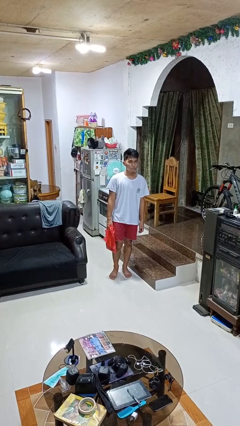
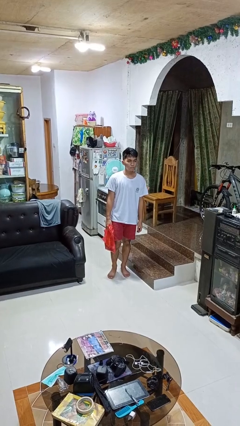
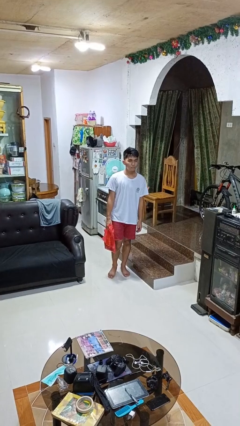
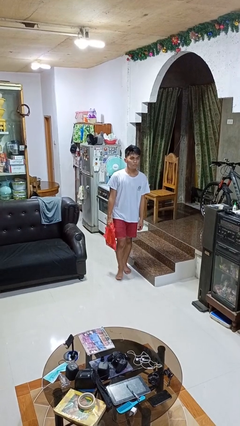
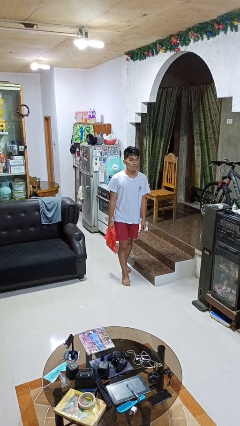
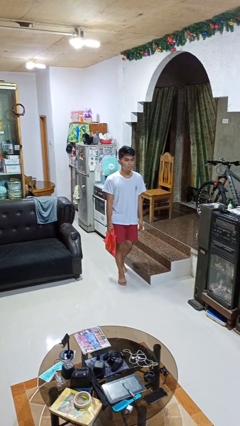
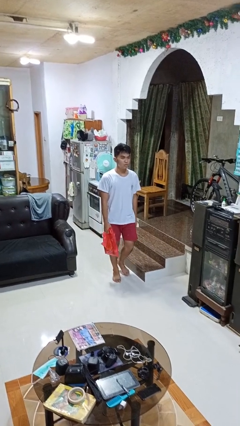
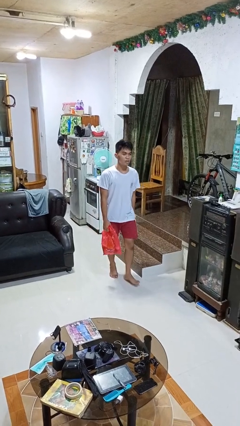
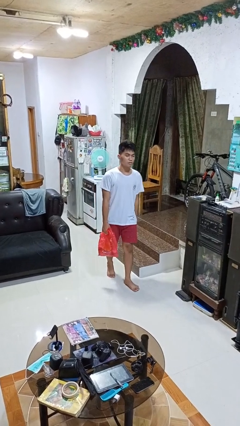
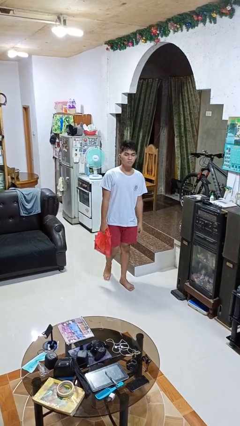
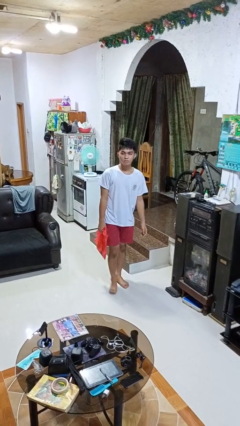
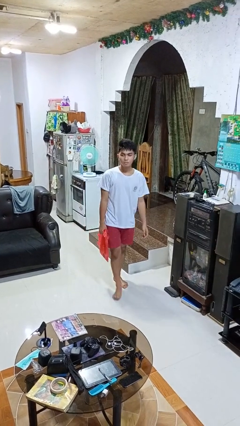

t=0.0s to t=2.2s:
person carries groceries

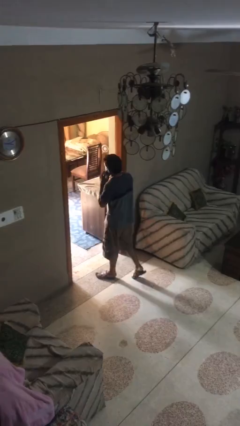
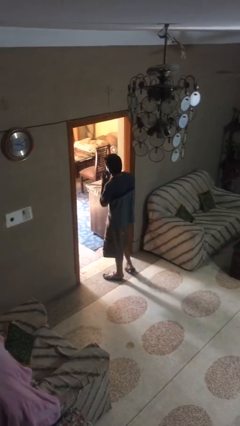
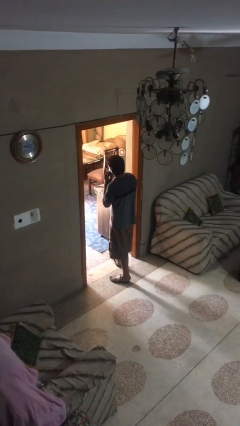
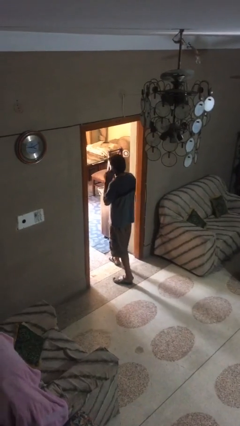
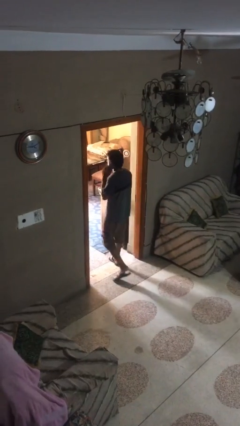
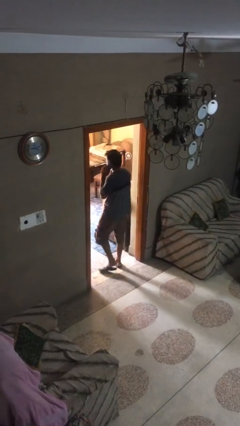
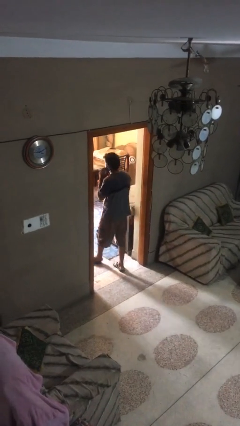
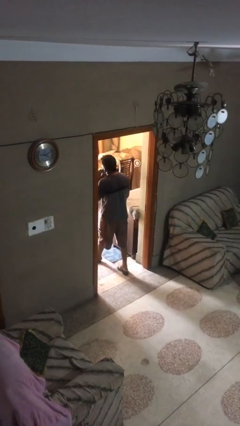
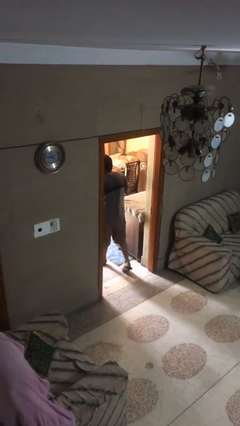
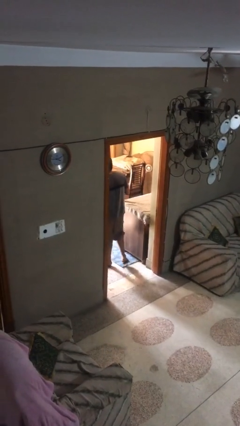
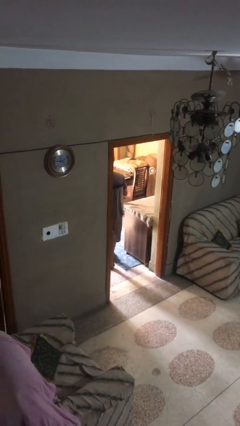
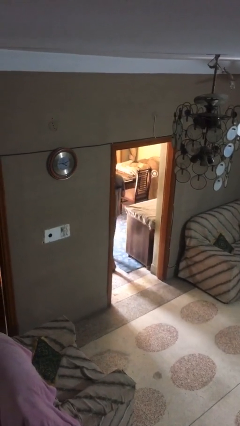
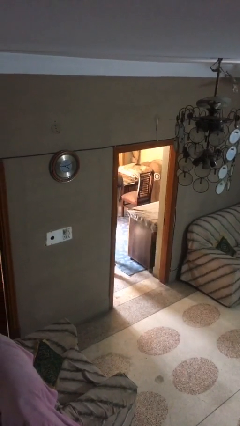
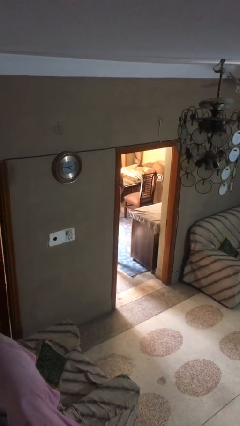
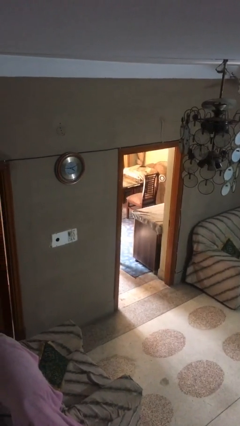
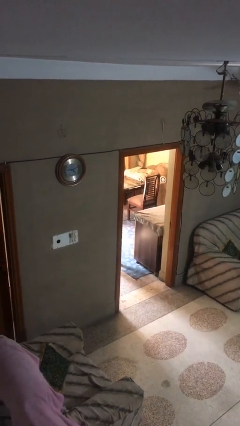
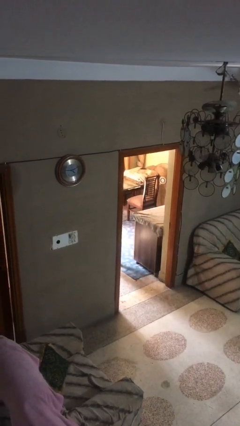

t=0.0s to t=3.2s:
person exits scene through structure

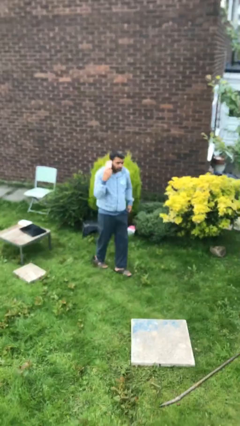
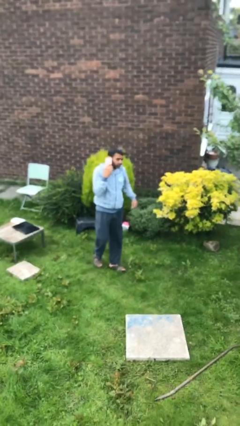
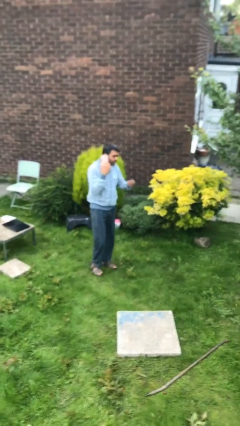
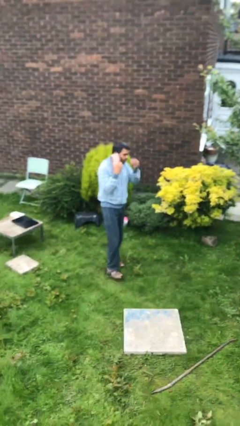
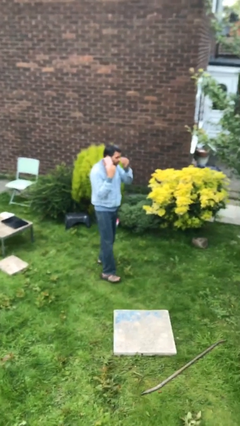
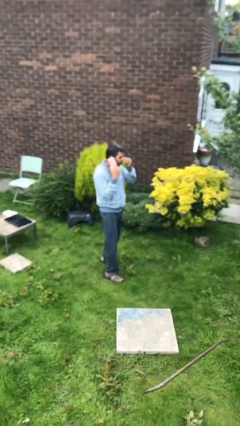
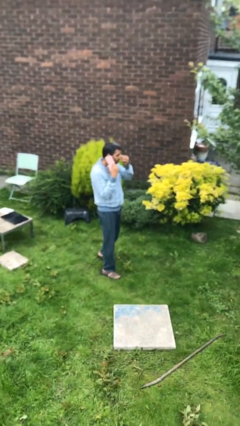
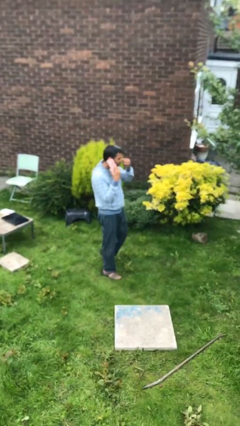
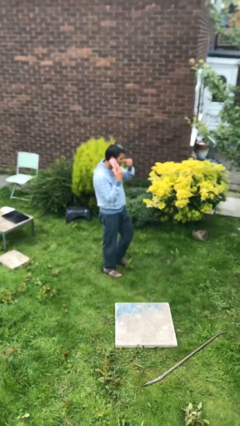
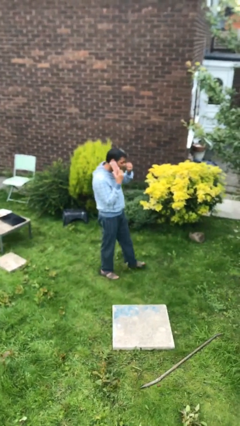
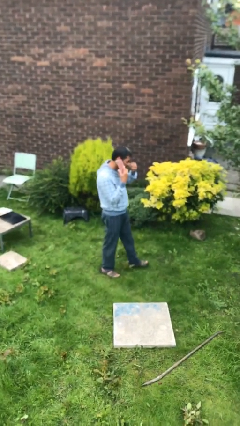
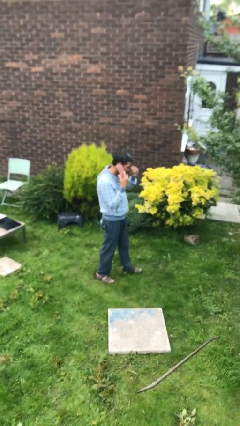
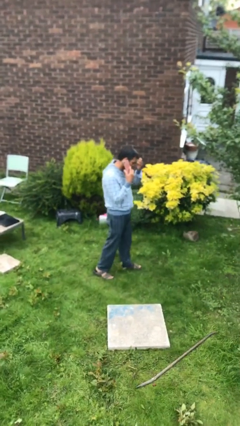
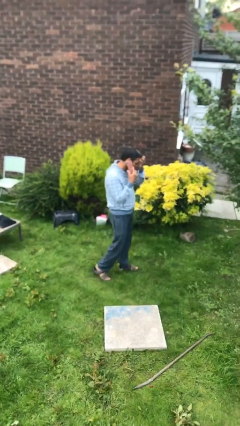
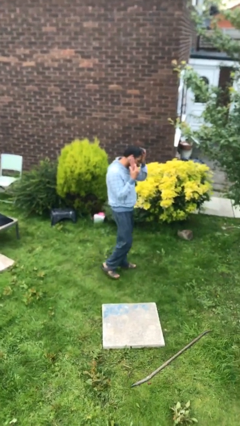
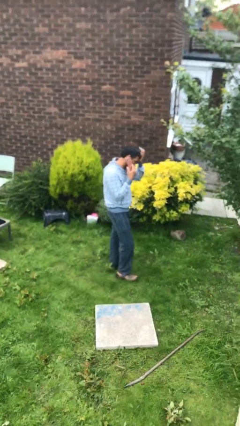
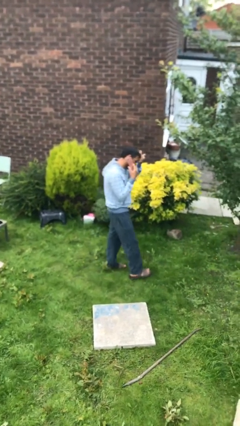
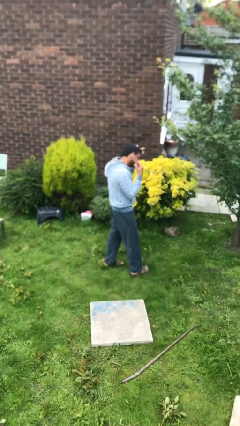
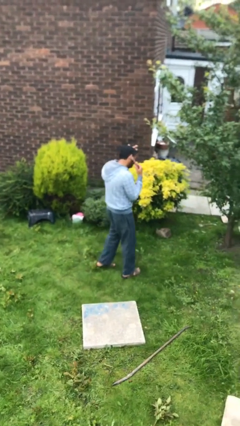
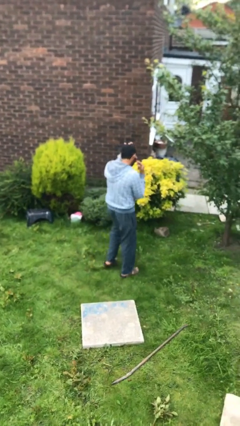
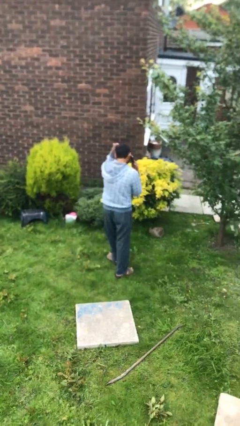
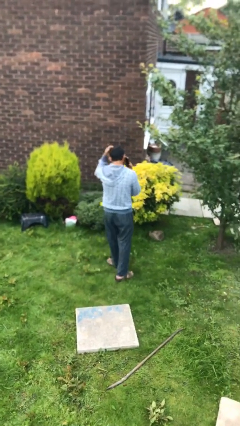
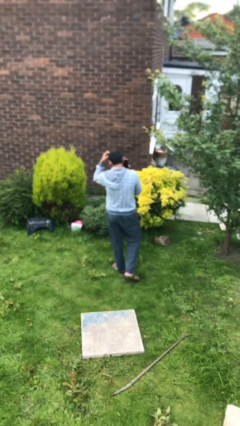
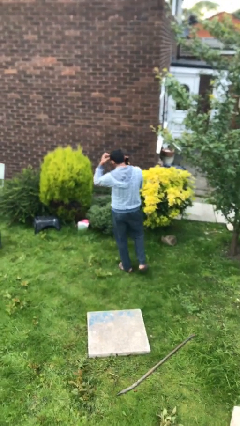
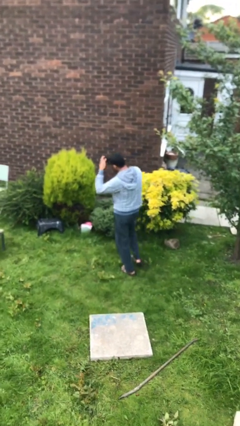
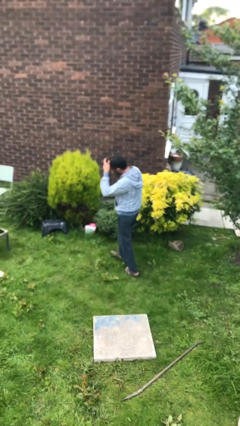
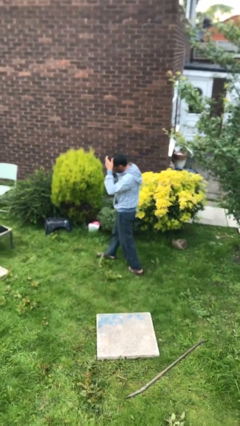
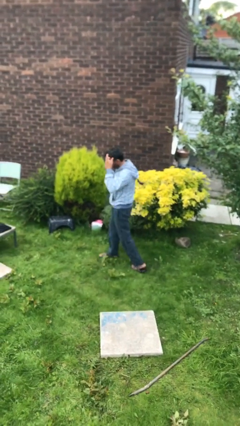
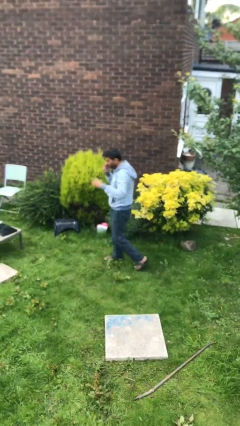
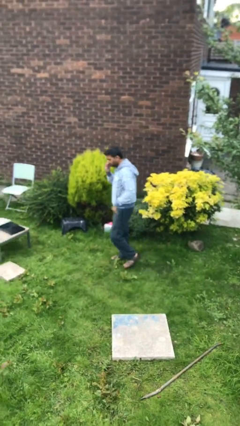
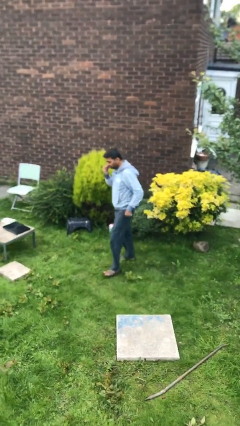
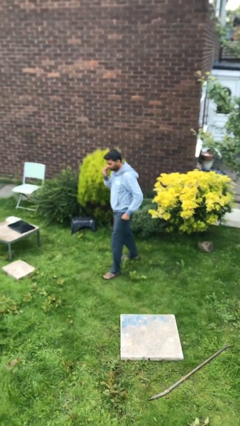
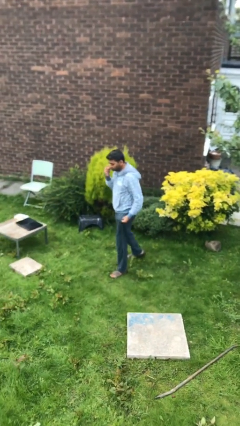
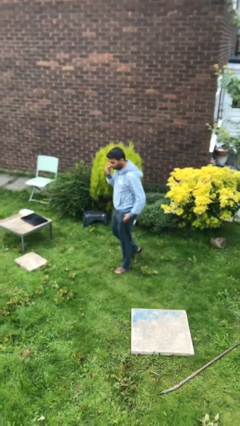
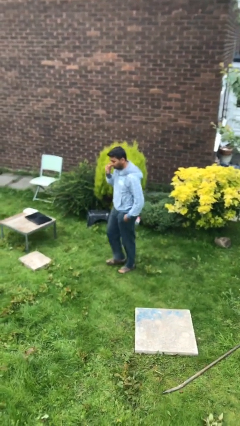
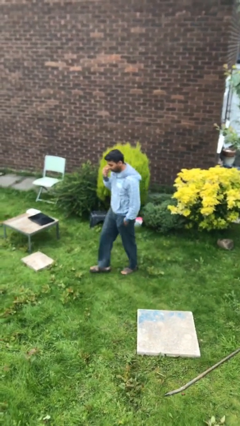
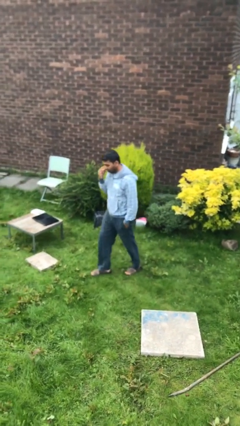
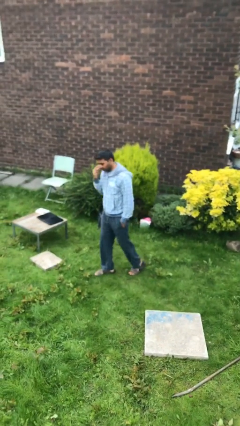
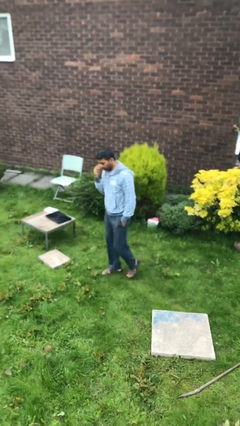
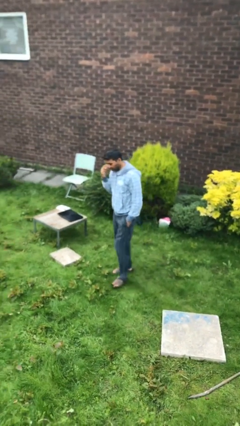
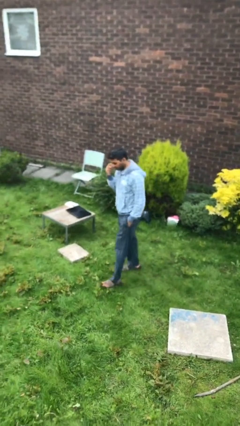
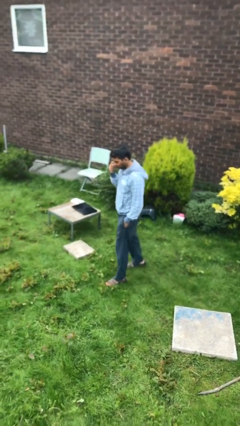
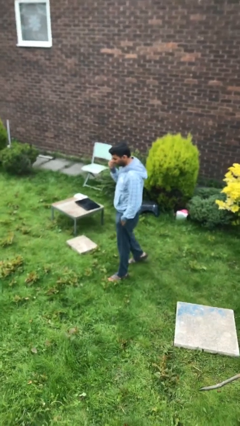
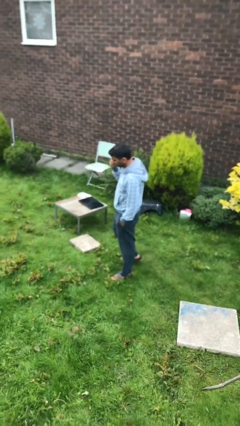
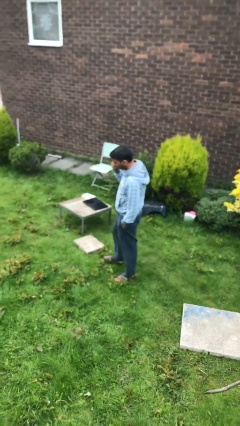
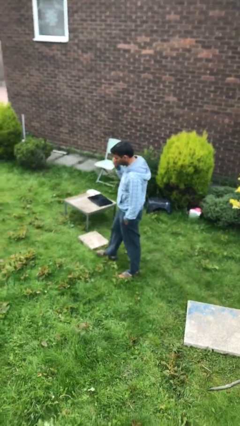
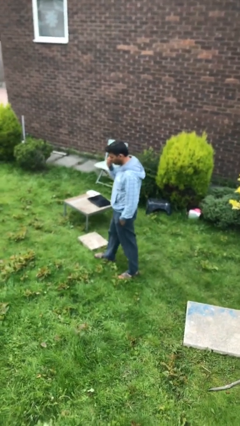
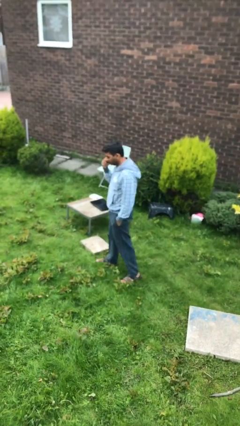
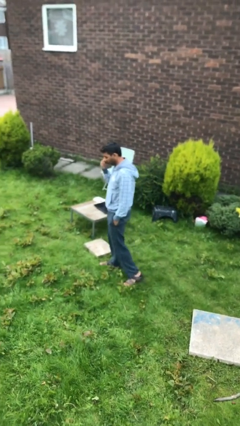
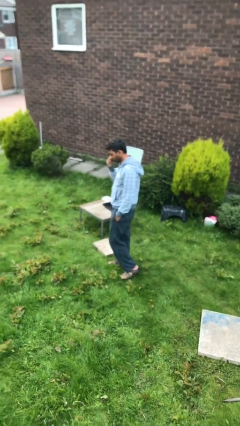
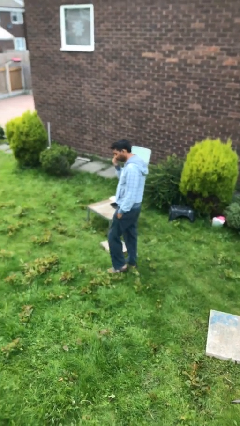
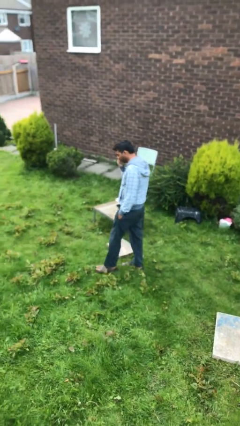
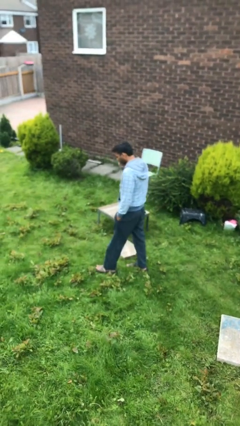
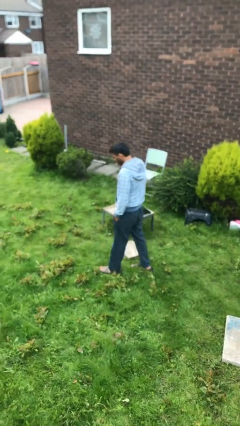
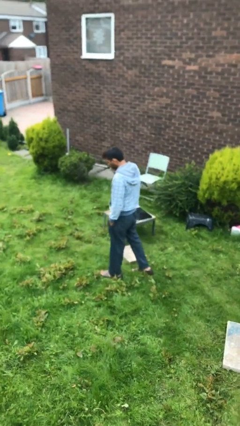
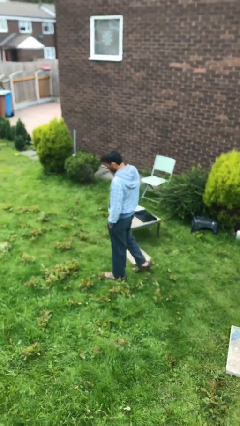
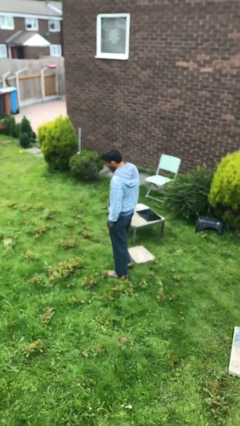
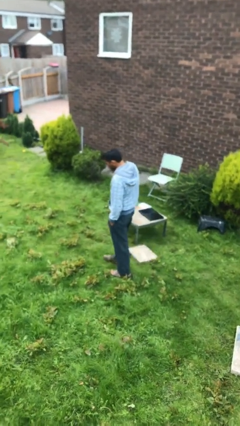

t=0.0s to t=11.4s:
person talks on phone

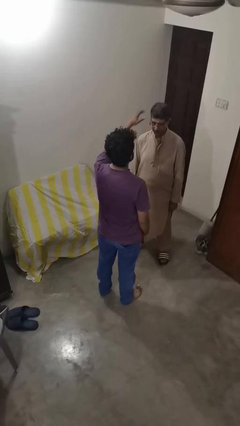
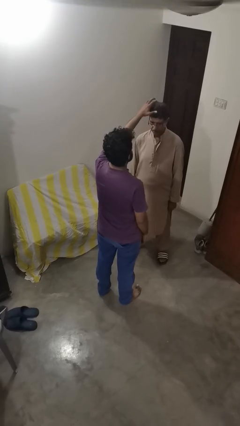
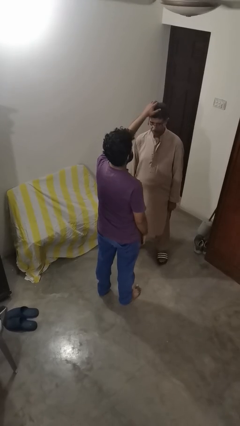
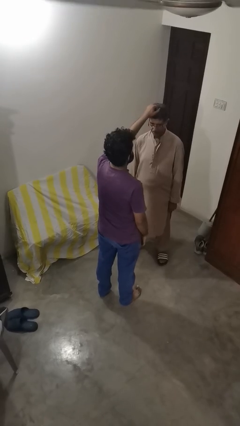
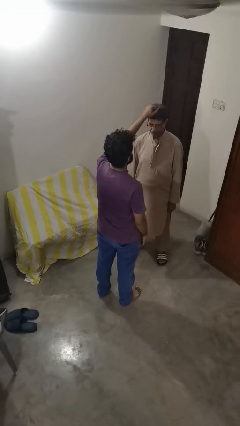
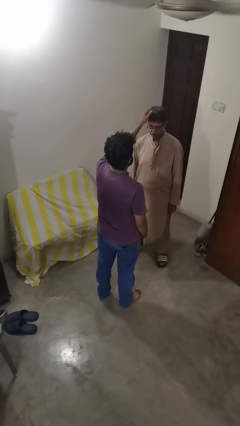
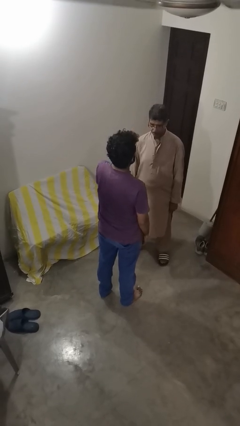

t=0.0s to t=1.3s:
person grabs person by hair
